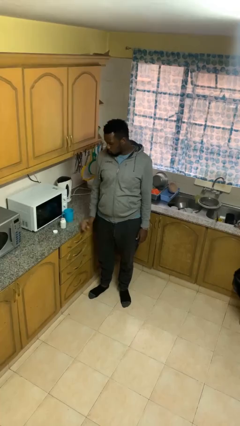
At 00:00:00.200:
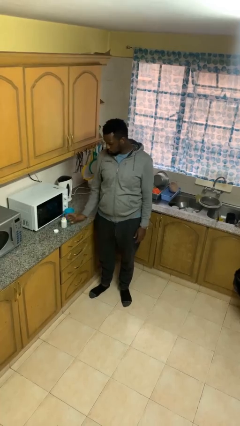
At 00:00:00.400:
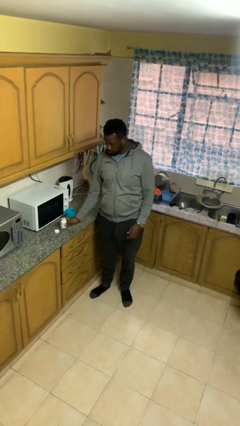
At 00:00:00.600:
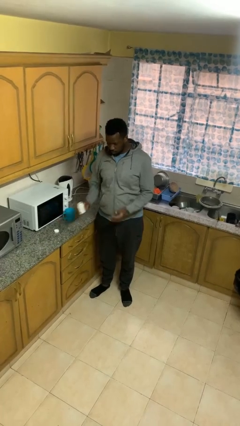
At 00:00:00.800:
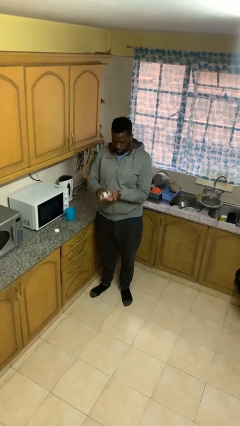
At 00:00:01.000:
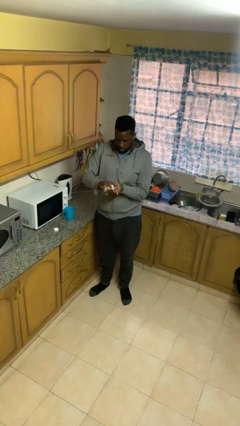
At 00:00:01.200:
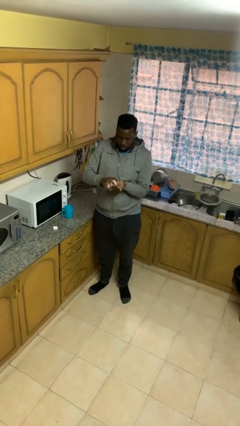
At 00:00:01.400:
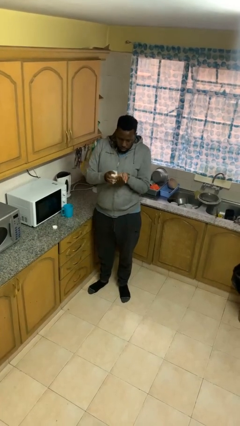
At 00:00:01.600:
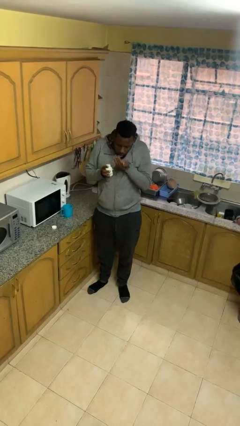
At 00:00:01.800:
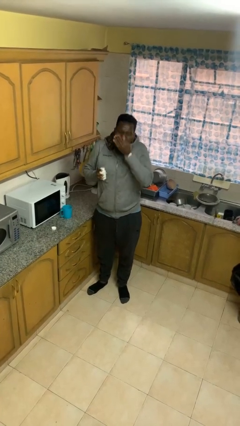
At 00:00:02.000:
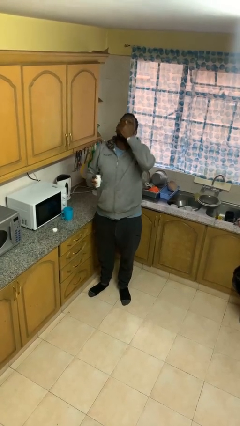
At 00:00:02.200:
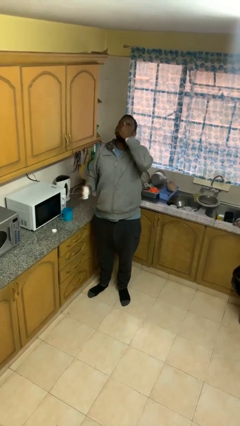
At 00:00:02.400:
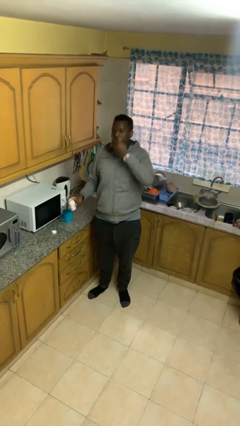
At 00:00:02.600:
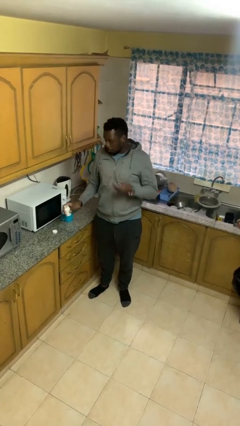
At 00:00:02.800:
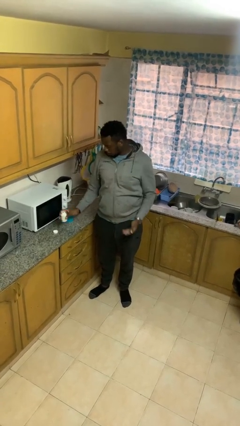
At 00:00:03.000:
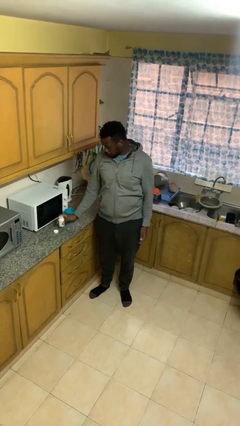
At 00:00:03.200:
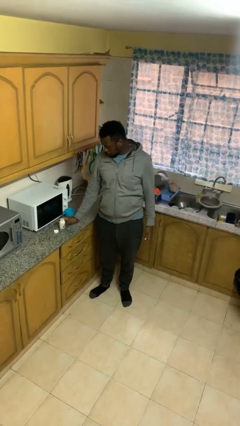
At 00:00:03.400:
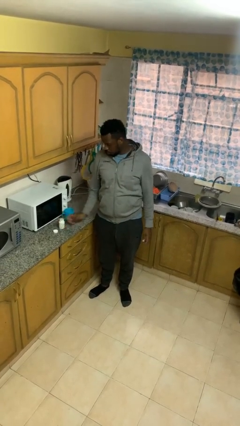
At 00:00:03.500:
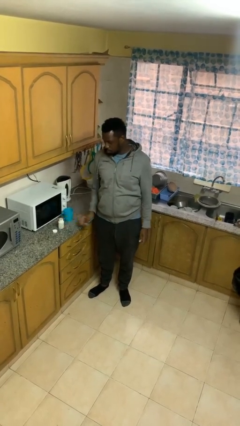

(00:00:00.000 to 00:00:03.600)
person takes medicine pills

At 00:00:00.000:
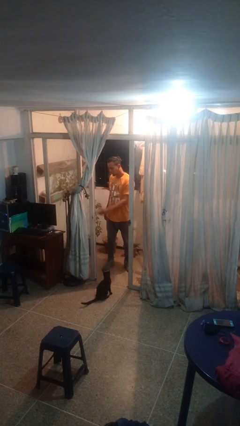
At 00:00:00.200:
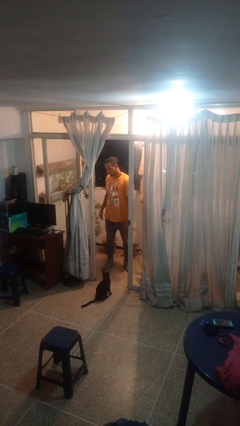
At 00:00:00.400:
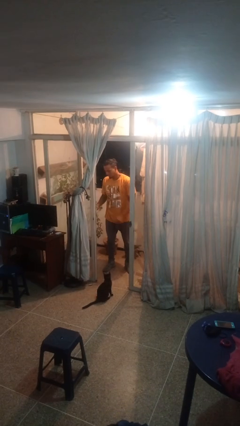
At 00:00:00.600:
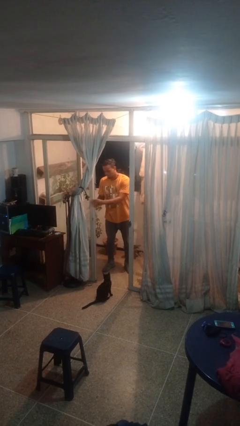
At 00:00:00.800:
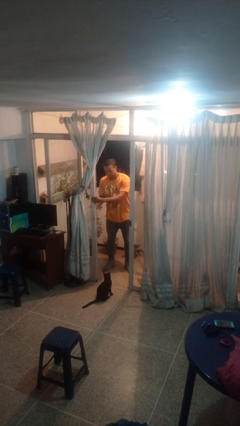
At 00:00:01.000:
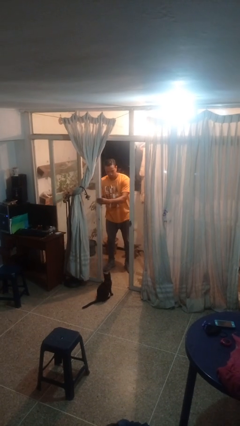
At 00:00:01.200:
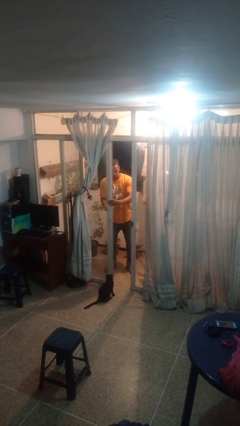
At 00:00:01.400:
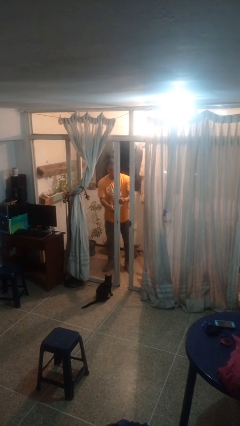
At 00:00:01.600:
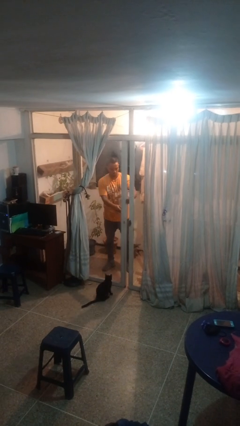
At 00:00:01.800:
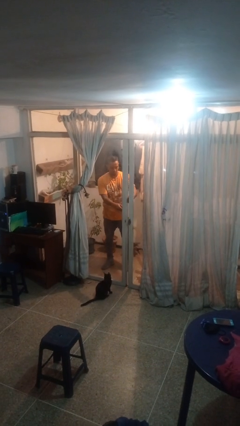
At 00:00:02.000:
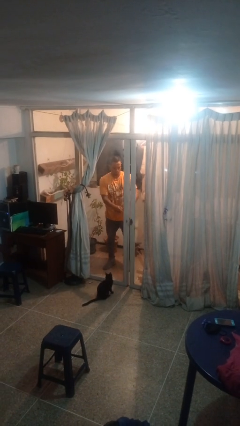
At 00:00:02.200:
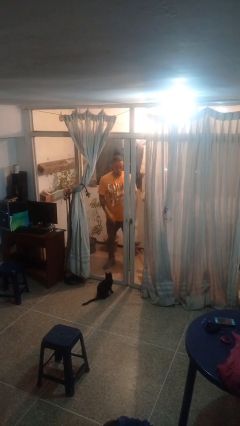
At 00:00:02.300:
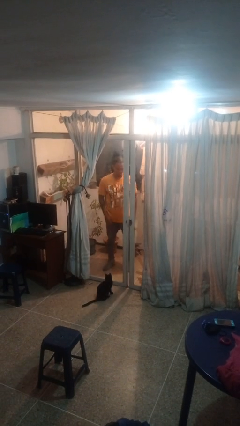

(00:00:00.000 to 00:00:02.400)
person closes sliding door

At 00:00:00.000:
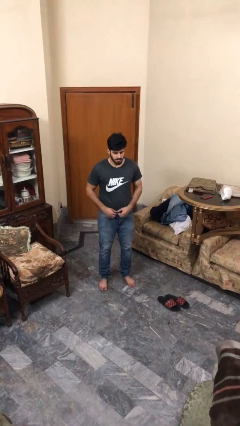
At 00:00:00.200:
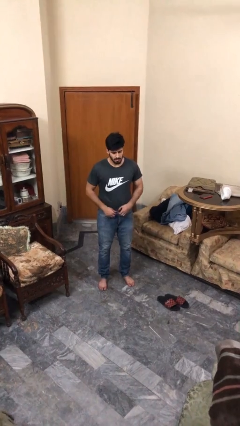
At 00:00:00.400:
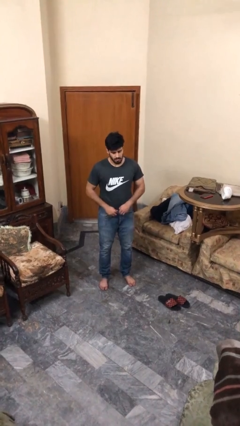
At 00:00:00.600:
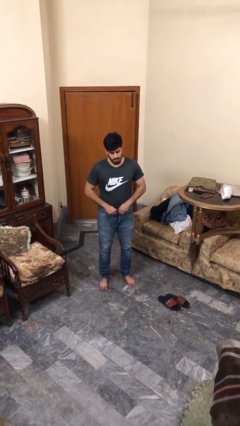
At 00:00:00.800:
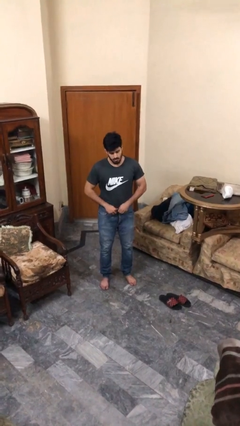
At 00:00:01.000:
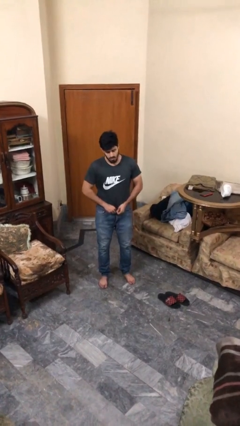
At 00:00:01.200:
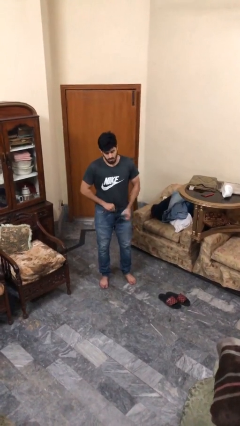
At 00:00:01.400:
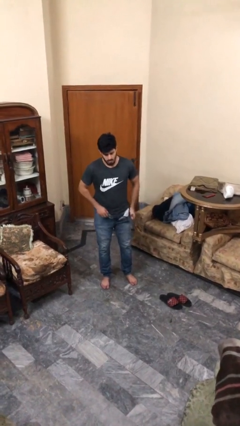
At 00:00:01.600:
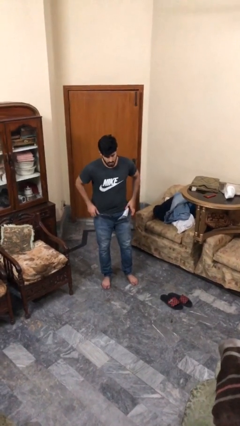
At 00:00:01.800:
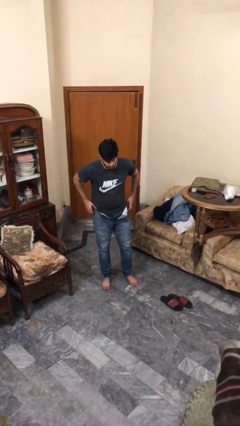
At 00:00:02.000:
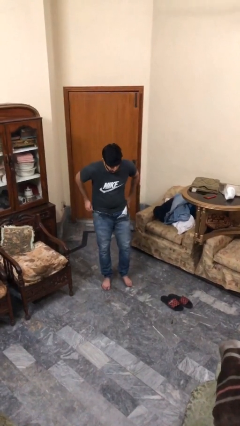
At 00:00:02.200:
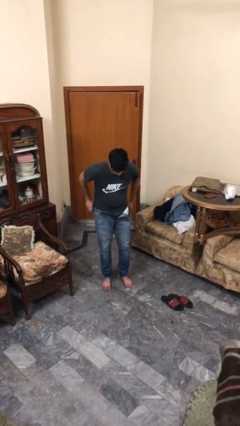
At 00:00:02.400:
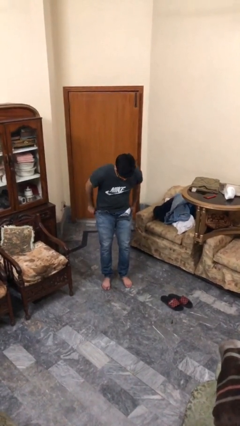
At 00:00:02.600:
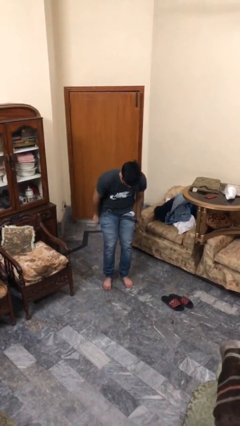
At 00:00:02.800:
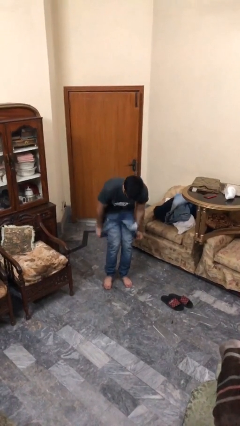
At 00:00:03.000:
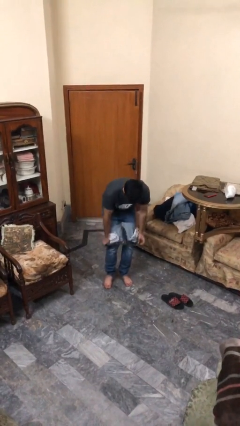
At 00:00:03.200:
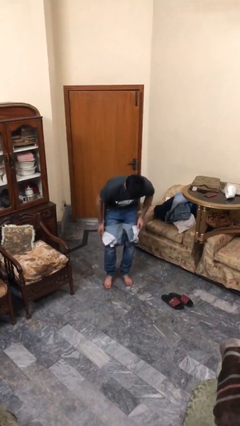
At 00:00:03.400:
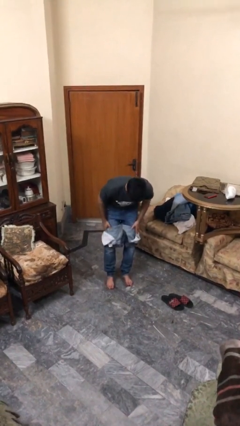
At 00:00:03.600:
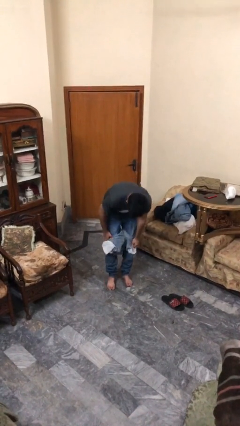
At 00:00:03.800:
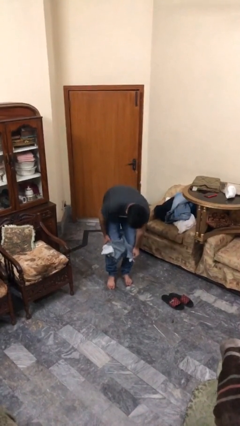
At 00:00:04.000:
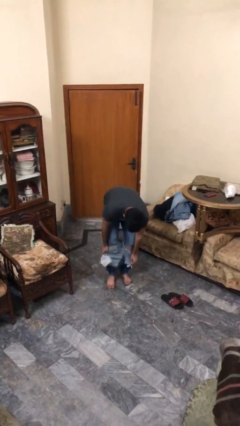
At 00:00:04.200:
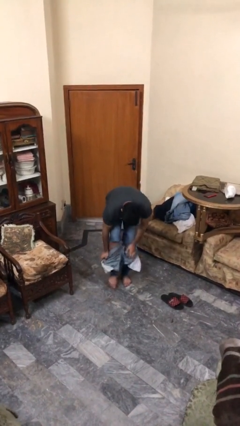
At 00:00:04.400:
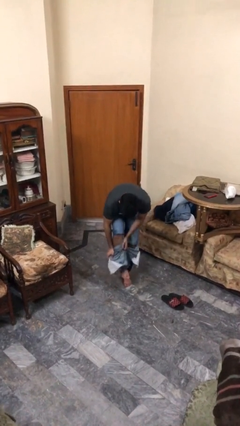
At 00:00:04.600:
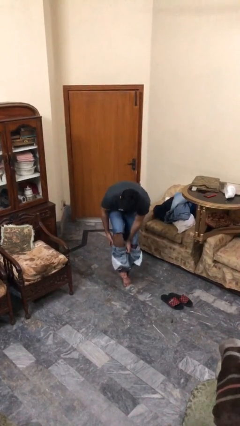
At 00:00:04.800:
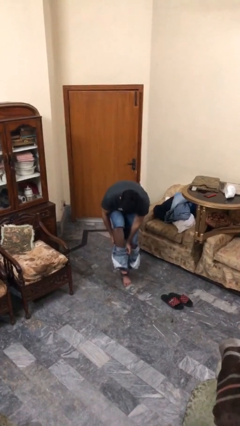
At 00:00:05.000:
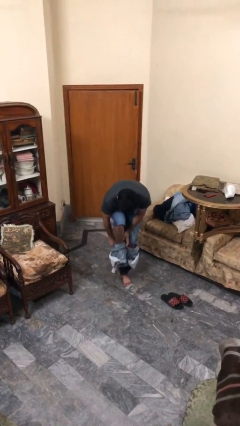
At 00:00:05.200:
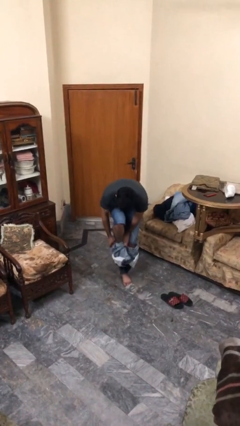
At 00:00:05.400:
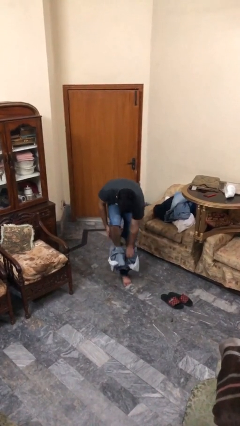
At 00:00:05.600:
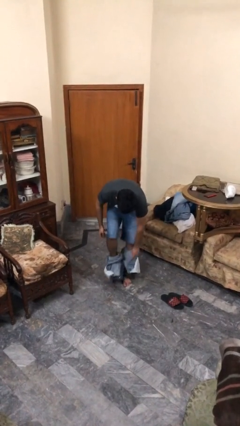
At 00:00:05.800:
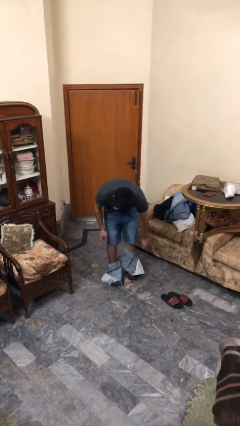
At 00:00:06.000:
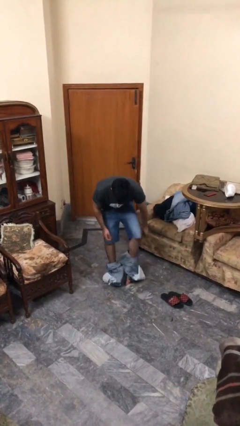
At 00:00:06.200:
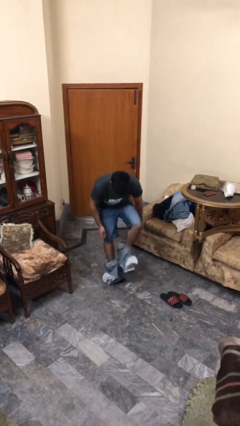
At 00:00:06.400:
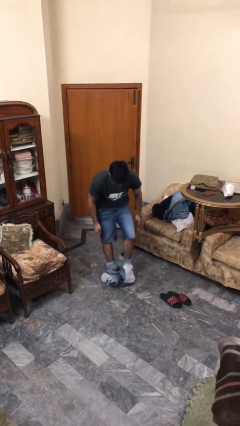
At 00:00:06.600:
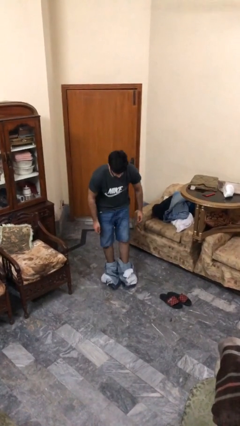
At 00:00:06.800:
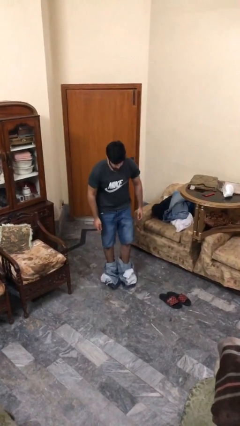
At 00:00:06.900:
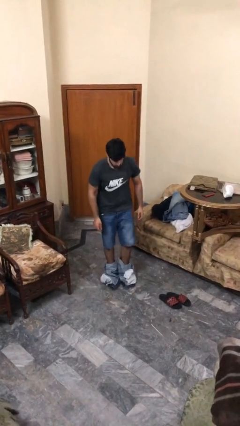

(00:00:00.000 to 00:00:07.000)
person takes off pants

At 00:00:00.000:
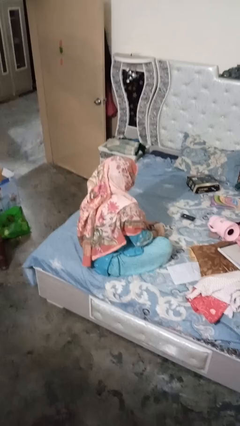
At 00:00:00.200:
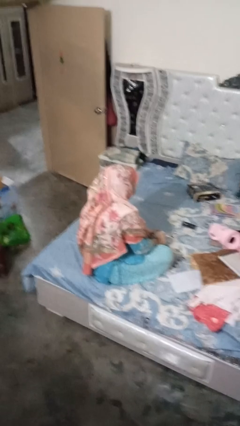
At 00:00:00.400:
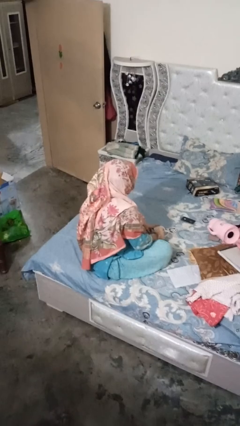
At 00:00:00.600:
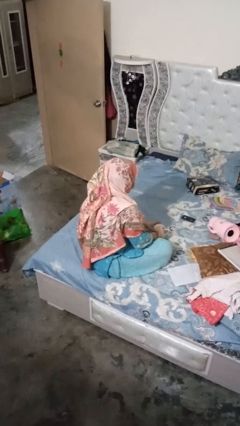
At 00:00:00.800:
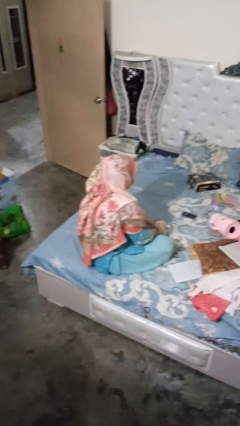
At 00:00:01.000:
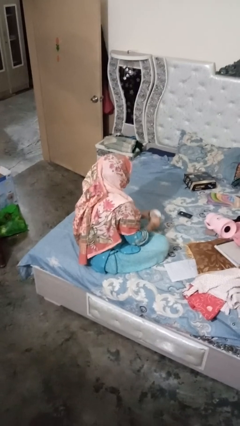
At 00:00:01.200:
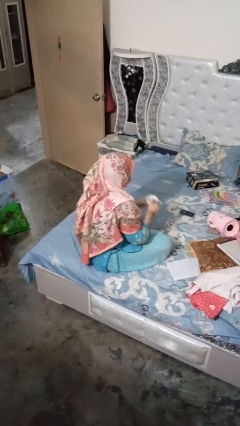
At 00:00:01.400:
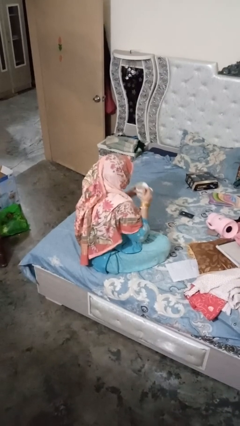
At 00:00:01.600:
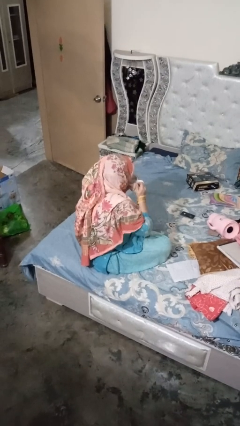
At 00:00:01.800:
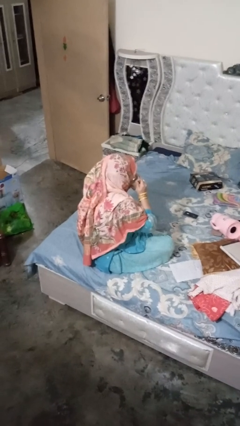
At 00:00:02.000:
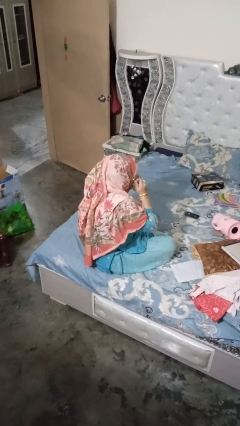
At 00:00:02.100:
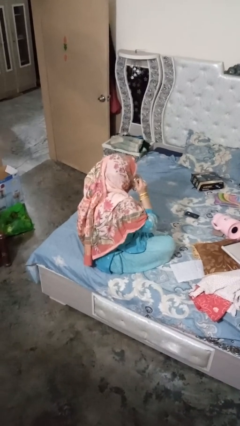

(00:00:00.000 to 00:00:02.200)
person drinks from mug

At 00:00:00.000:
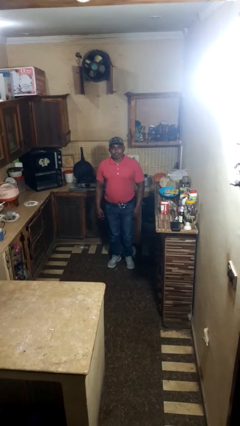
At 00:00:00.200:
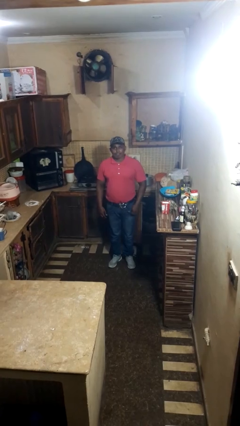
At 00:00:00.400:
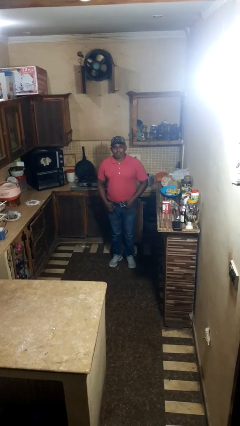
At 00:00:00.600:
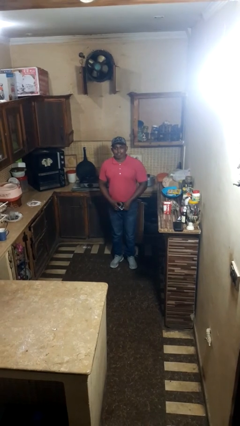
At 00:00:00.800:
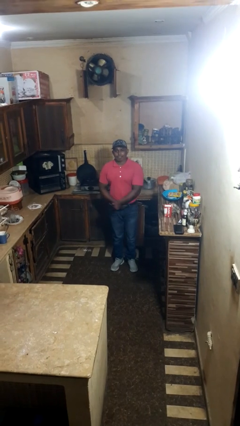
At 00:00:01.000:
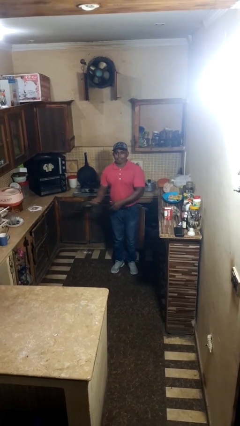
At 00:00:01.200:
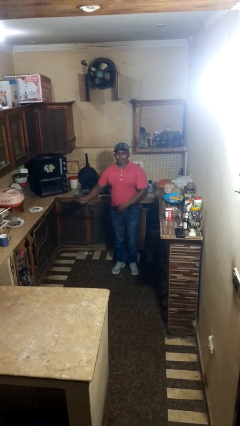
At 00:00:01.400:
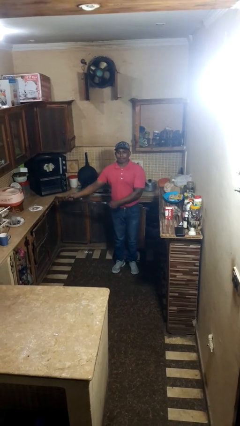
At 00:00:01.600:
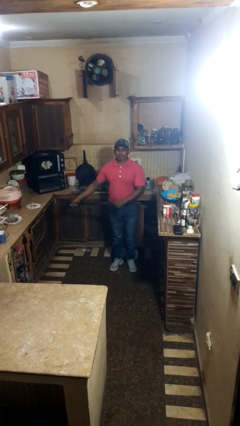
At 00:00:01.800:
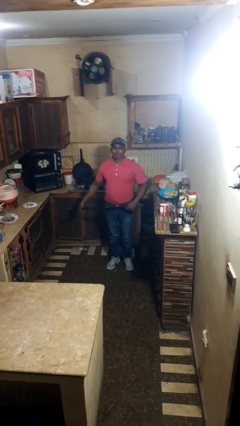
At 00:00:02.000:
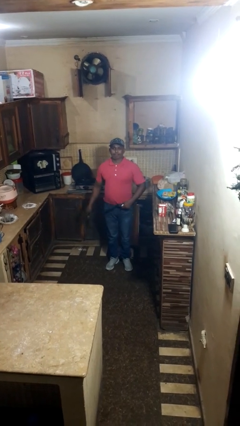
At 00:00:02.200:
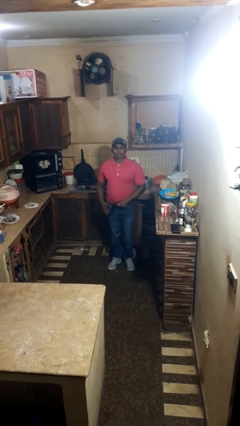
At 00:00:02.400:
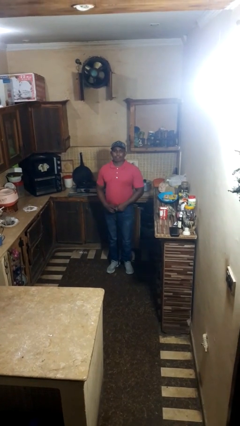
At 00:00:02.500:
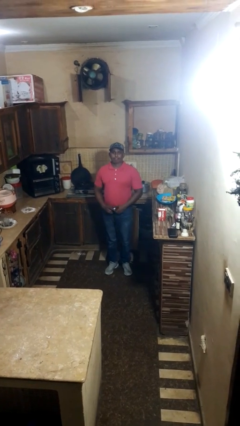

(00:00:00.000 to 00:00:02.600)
person takes off belt
